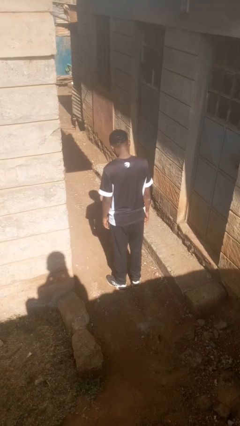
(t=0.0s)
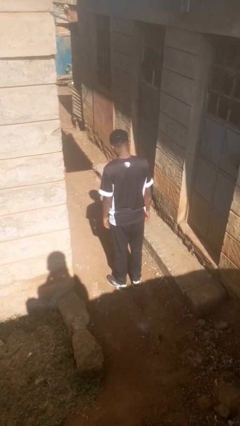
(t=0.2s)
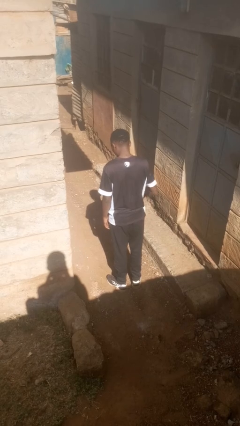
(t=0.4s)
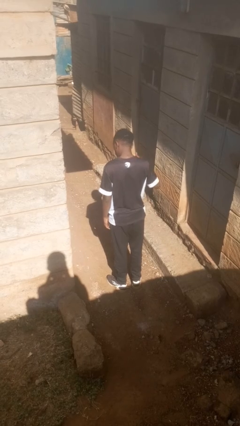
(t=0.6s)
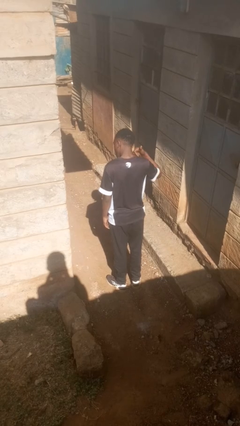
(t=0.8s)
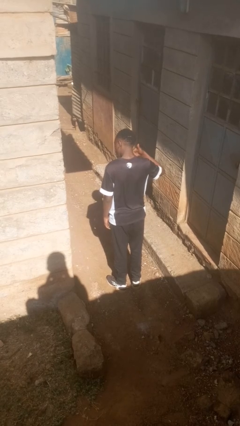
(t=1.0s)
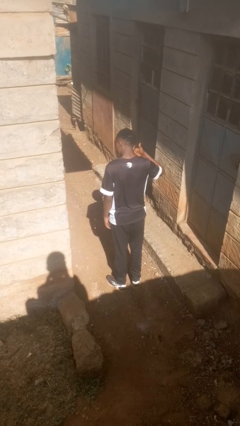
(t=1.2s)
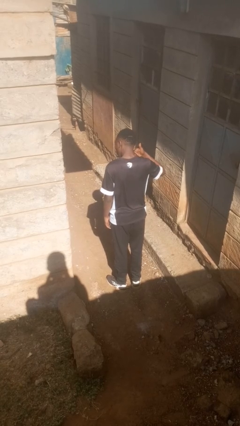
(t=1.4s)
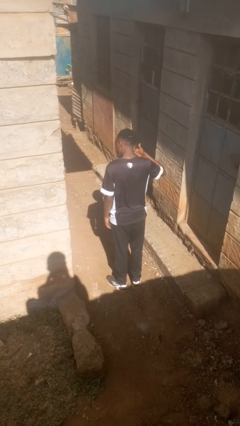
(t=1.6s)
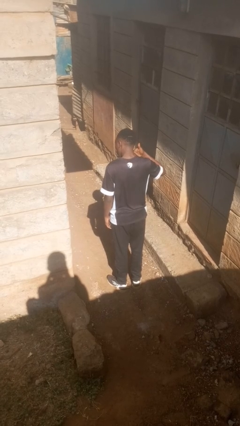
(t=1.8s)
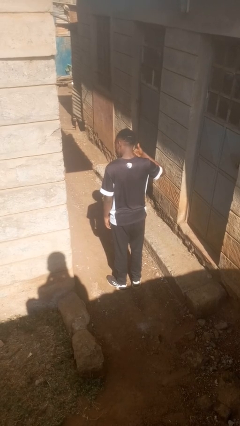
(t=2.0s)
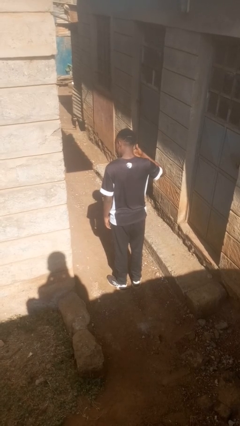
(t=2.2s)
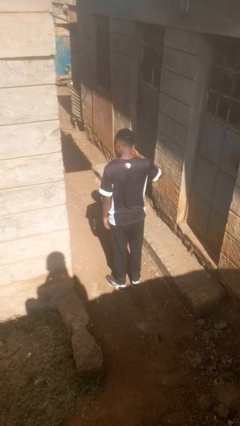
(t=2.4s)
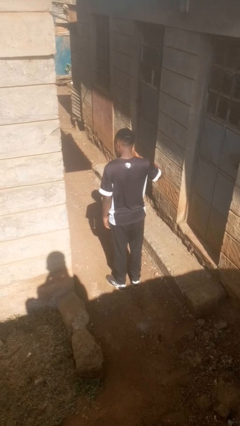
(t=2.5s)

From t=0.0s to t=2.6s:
person gestures call me

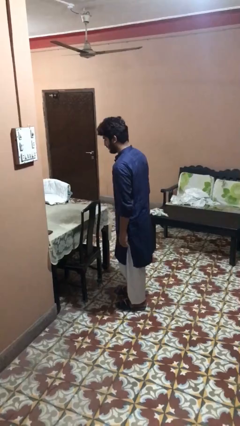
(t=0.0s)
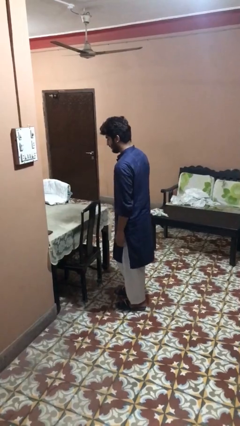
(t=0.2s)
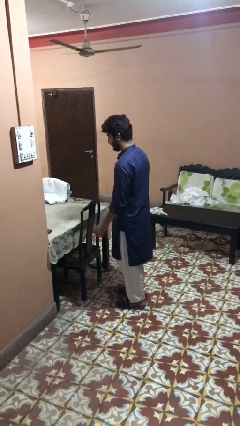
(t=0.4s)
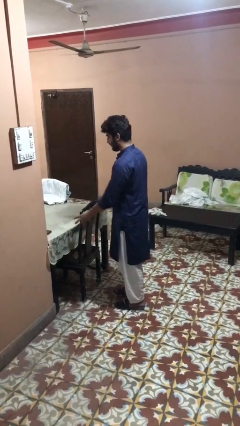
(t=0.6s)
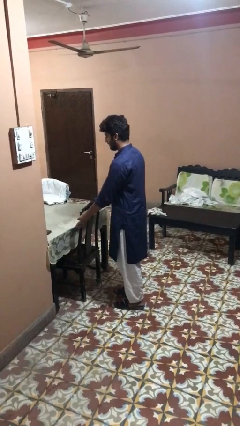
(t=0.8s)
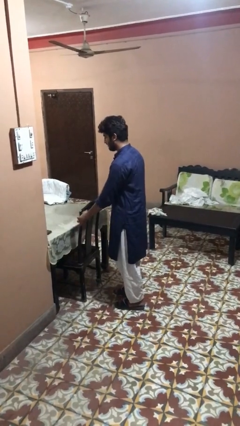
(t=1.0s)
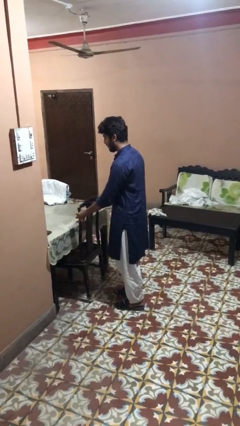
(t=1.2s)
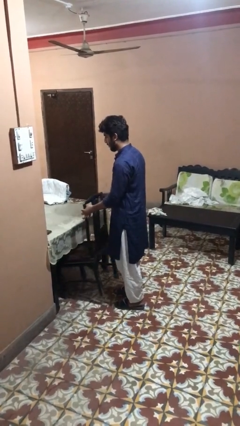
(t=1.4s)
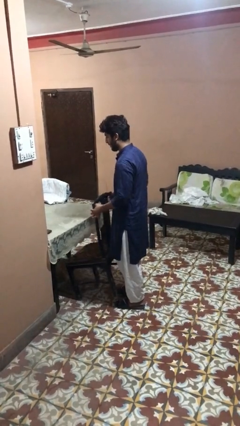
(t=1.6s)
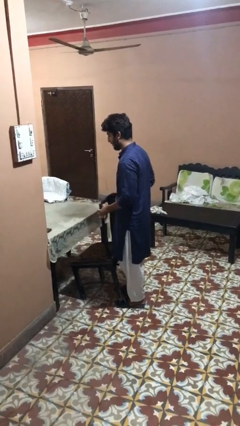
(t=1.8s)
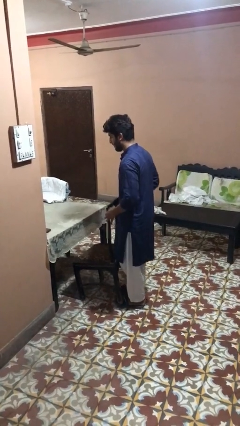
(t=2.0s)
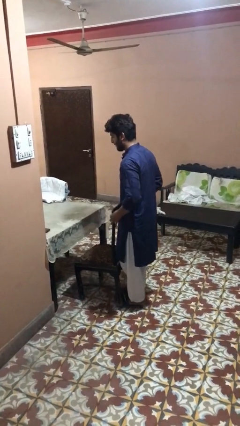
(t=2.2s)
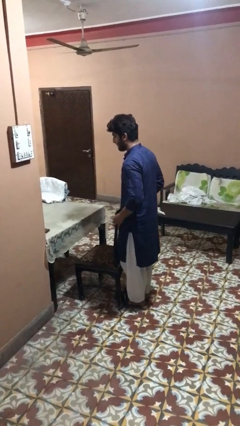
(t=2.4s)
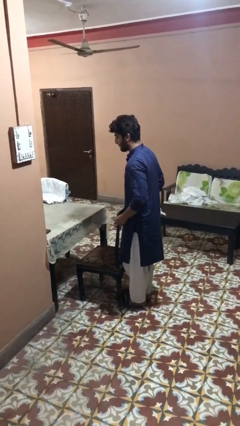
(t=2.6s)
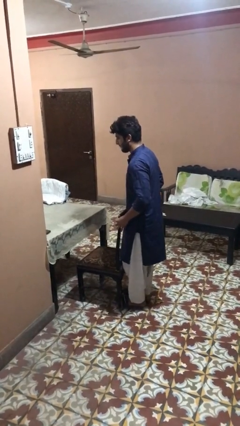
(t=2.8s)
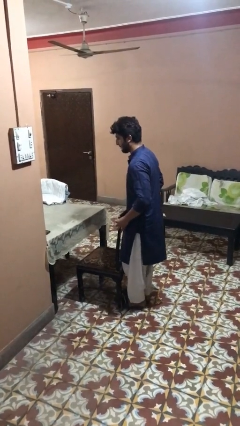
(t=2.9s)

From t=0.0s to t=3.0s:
person pulls out chair

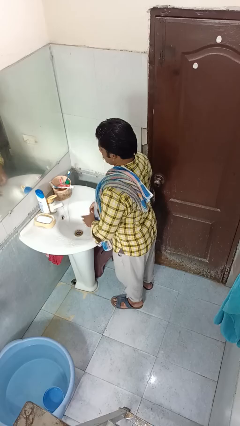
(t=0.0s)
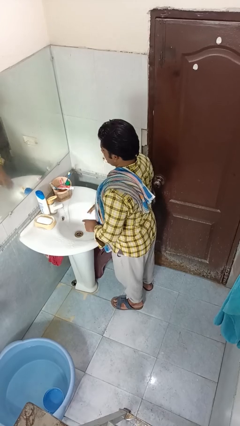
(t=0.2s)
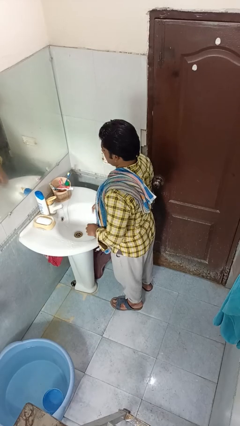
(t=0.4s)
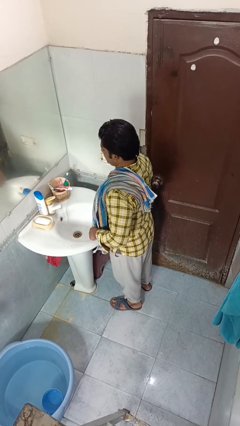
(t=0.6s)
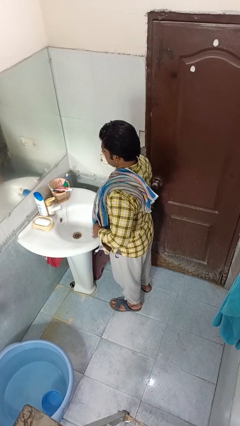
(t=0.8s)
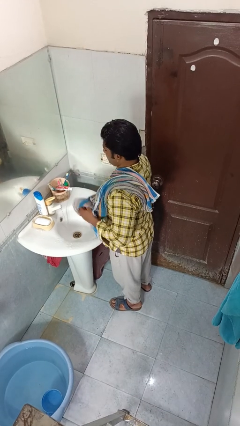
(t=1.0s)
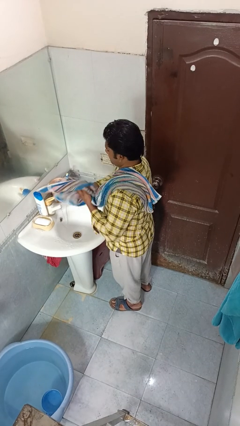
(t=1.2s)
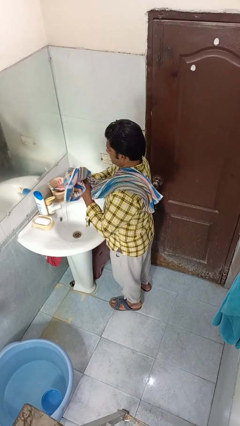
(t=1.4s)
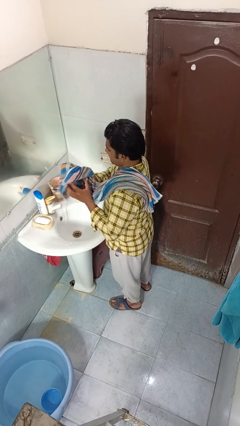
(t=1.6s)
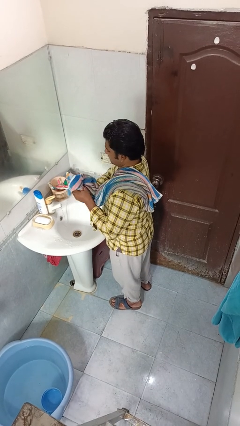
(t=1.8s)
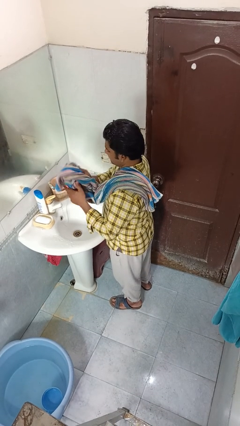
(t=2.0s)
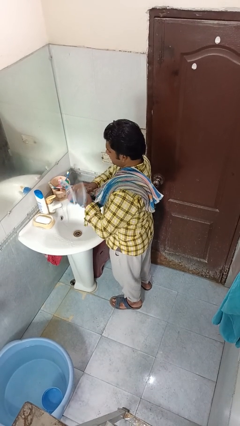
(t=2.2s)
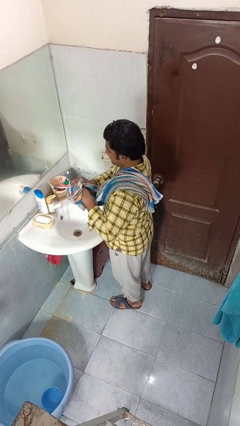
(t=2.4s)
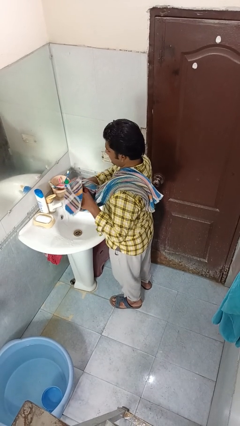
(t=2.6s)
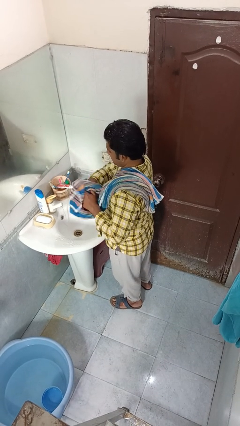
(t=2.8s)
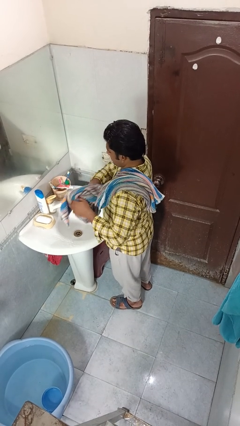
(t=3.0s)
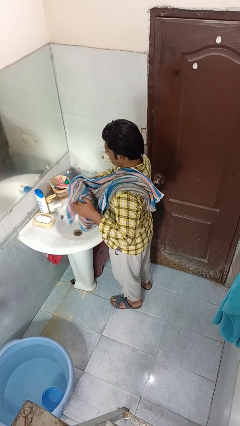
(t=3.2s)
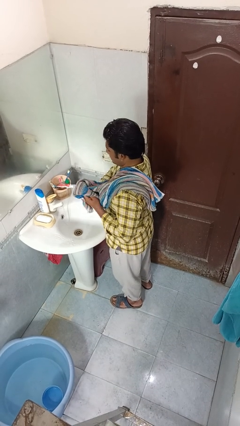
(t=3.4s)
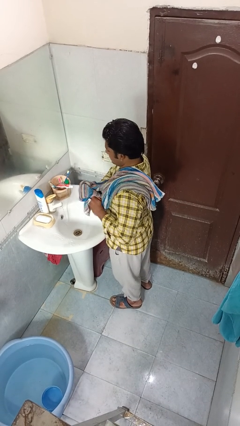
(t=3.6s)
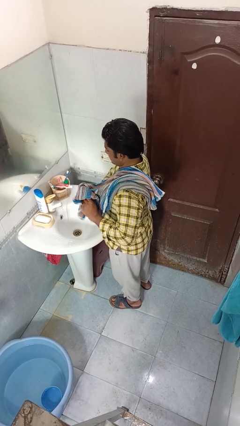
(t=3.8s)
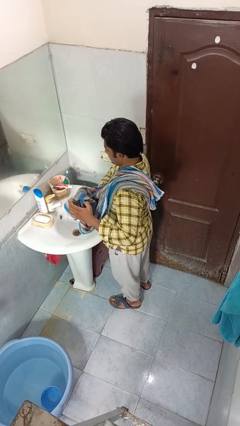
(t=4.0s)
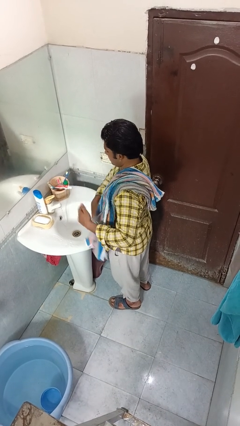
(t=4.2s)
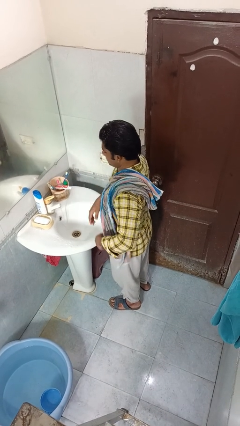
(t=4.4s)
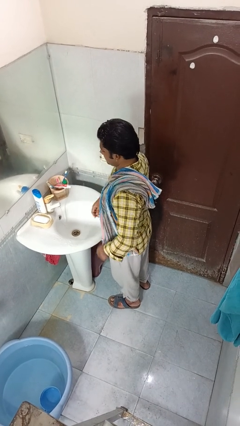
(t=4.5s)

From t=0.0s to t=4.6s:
person dries hands with towel

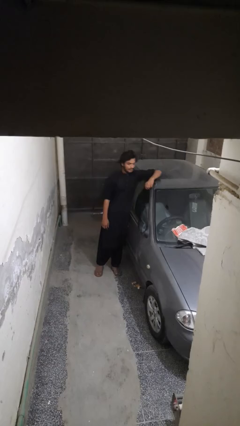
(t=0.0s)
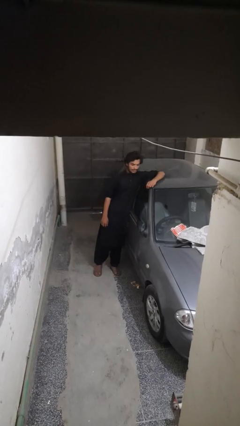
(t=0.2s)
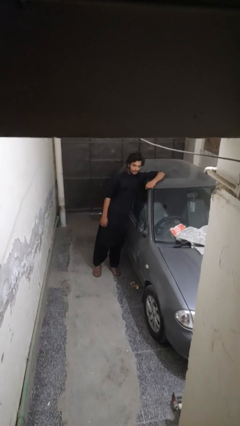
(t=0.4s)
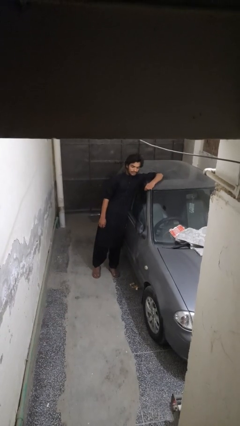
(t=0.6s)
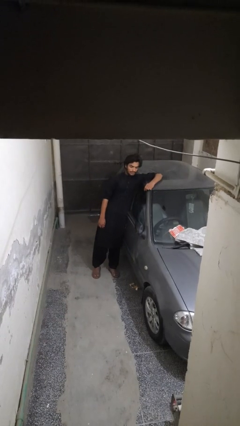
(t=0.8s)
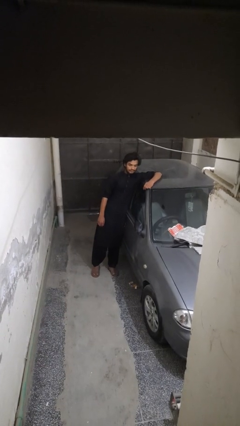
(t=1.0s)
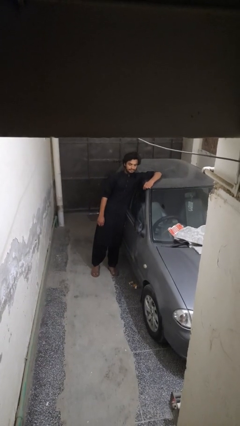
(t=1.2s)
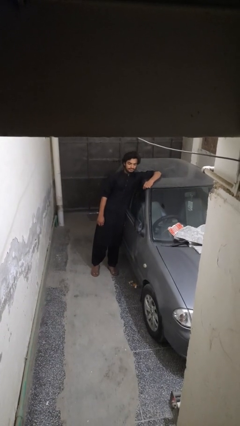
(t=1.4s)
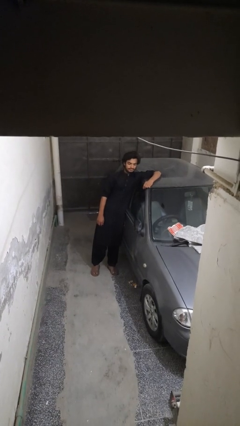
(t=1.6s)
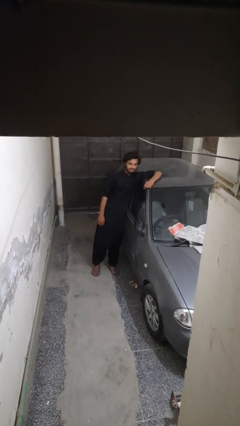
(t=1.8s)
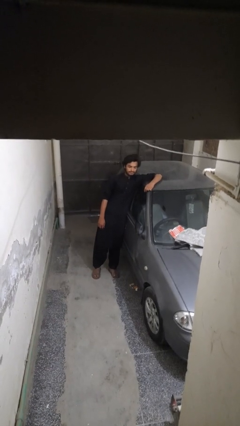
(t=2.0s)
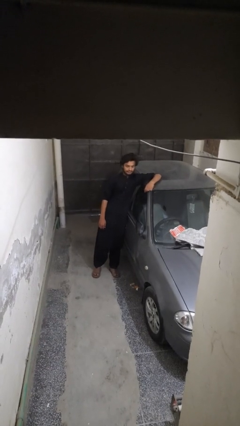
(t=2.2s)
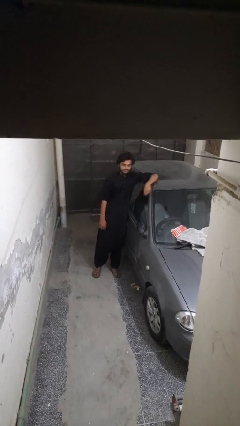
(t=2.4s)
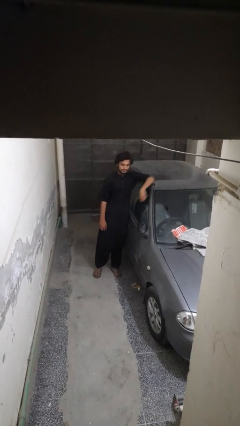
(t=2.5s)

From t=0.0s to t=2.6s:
person leans against car

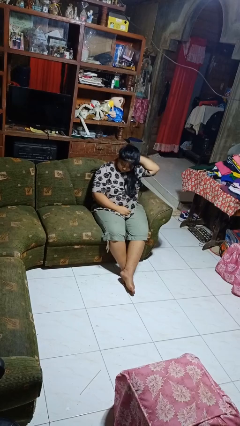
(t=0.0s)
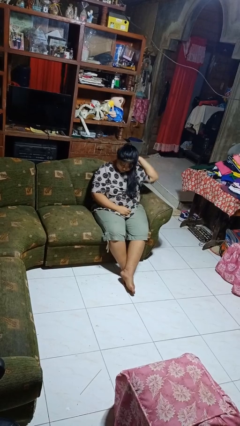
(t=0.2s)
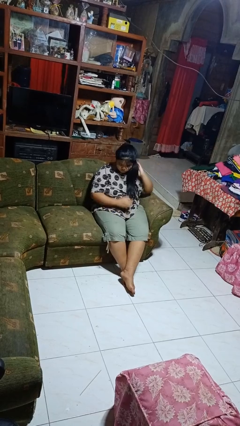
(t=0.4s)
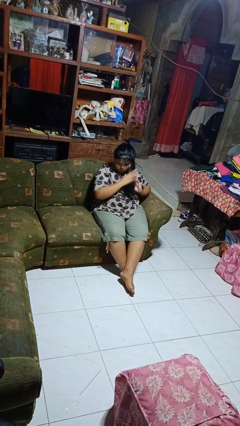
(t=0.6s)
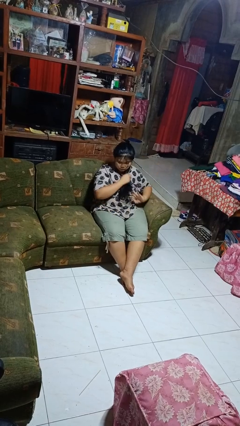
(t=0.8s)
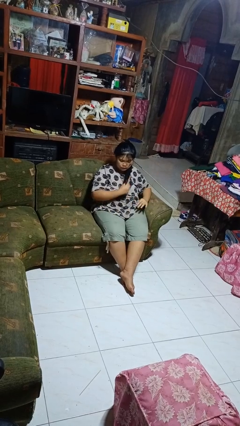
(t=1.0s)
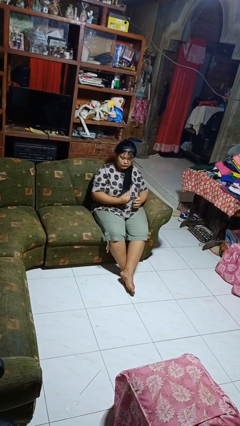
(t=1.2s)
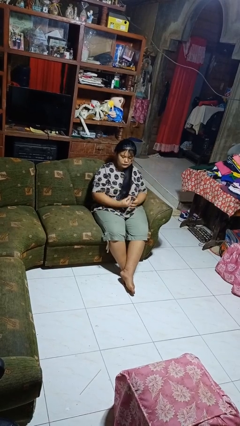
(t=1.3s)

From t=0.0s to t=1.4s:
person strokes hair

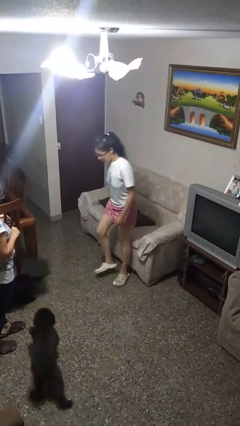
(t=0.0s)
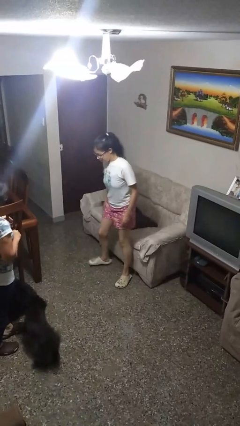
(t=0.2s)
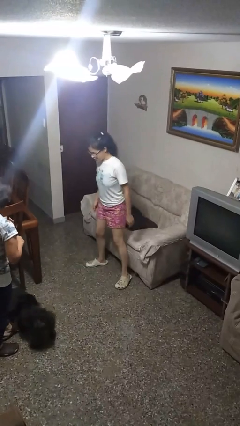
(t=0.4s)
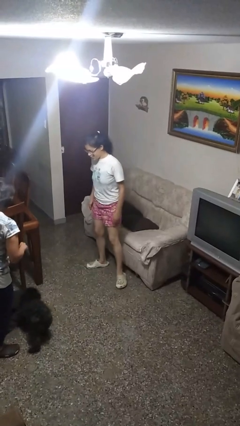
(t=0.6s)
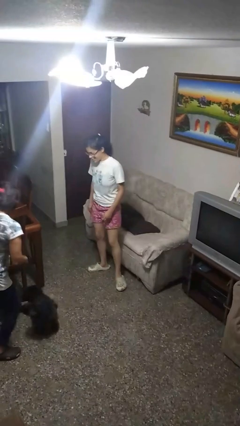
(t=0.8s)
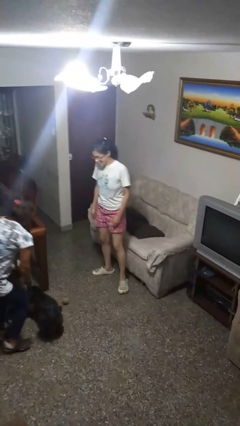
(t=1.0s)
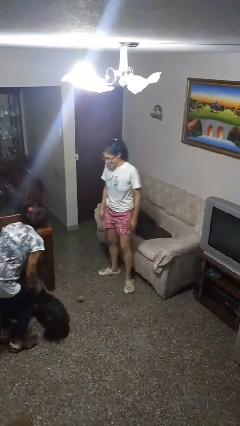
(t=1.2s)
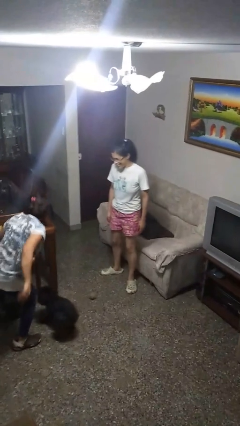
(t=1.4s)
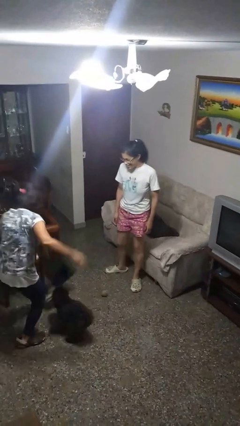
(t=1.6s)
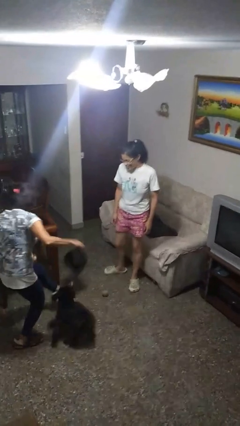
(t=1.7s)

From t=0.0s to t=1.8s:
person kicks object to person

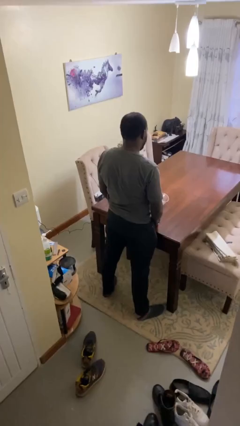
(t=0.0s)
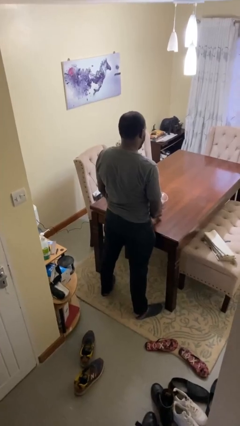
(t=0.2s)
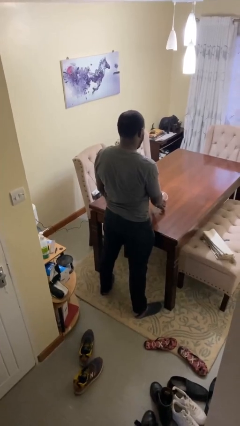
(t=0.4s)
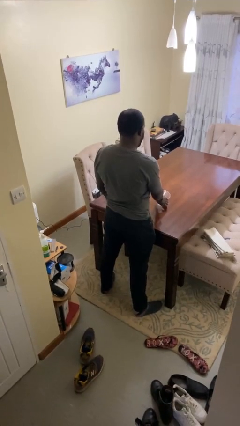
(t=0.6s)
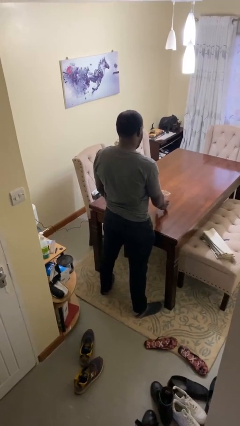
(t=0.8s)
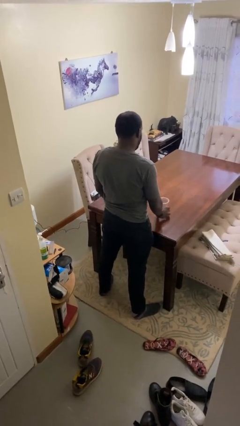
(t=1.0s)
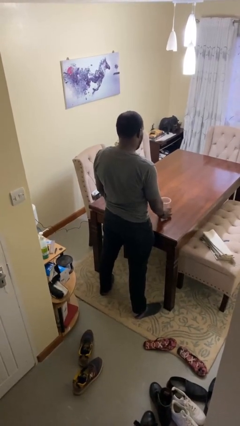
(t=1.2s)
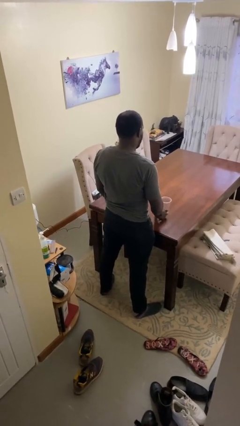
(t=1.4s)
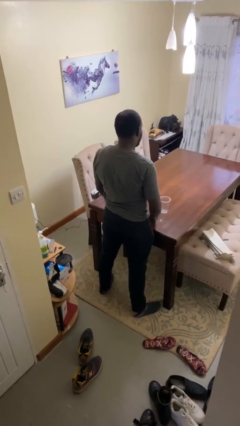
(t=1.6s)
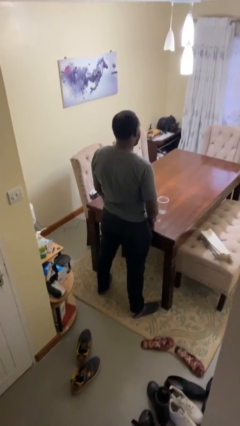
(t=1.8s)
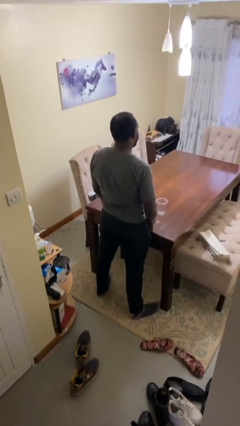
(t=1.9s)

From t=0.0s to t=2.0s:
person sets upright glass
